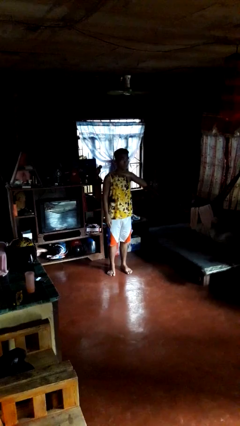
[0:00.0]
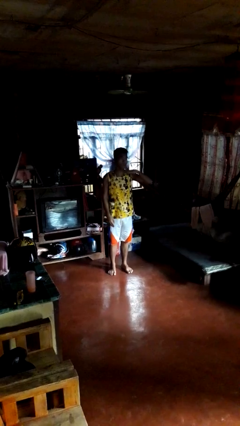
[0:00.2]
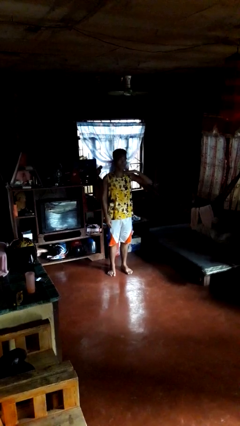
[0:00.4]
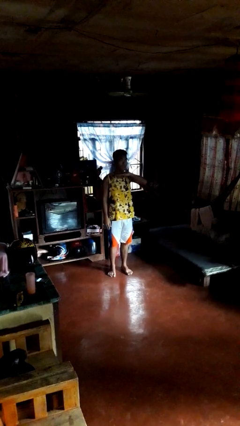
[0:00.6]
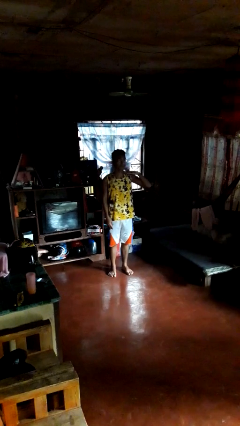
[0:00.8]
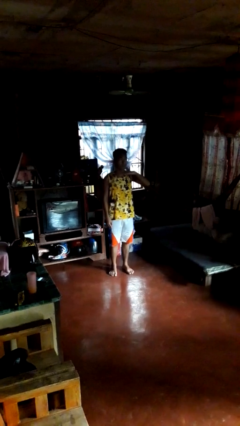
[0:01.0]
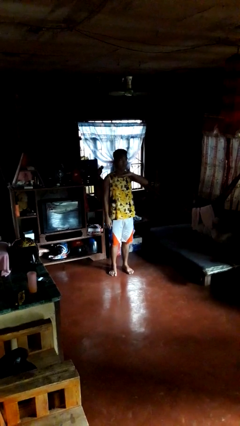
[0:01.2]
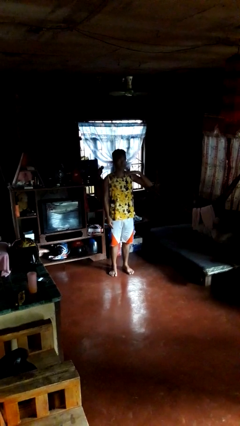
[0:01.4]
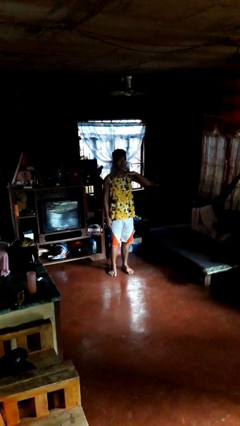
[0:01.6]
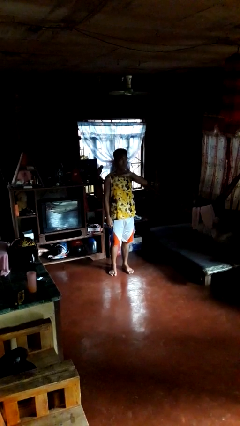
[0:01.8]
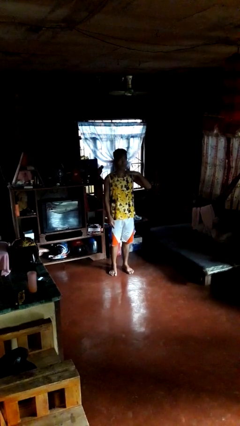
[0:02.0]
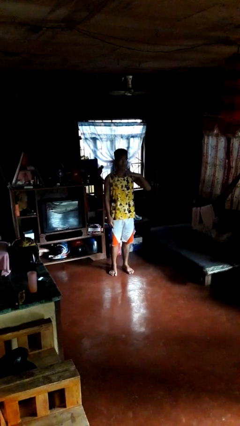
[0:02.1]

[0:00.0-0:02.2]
person gestures cut

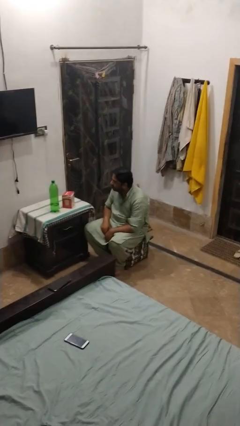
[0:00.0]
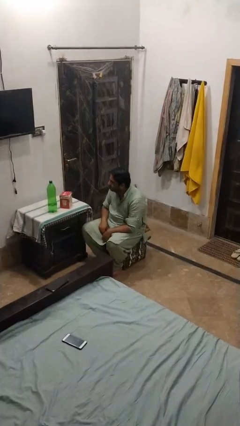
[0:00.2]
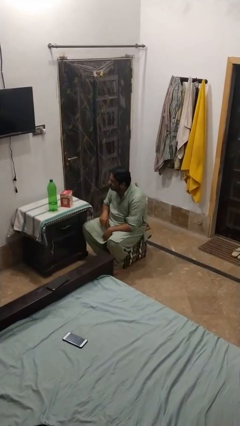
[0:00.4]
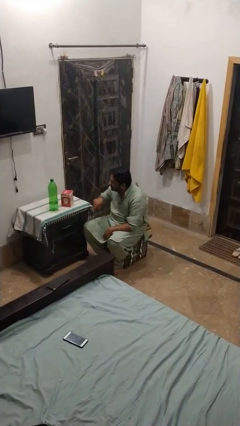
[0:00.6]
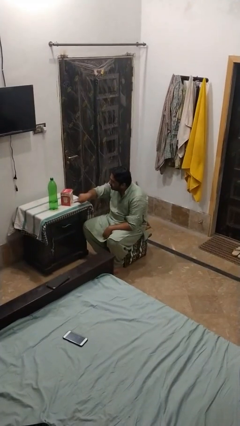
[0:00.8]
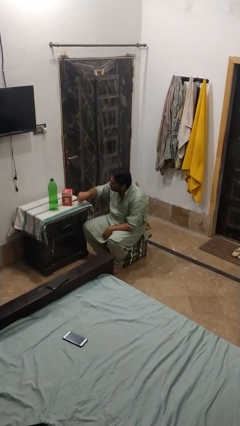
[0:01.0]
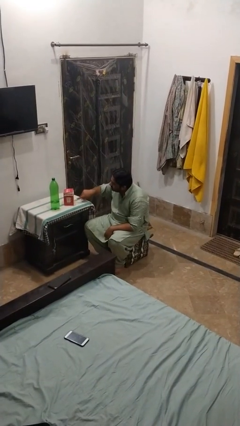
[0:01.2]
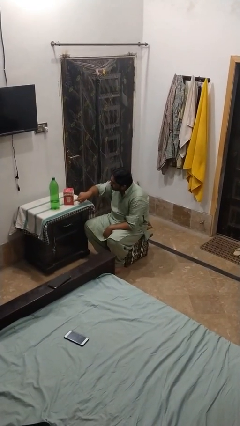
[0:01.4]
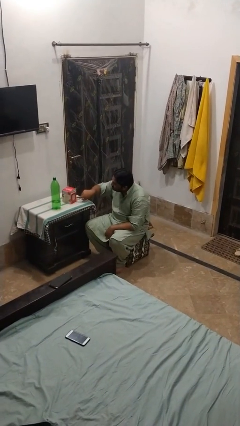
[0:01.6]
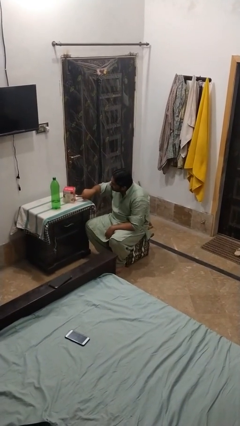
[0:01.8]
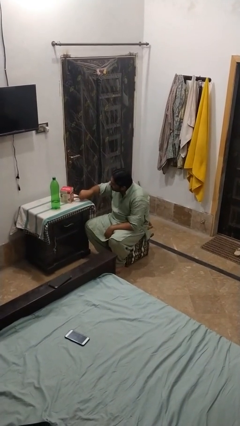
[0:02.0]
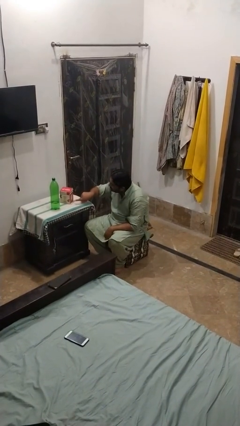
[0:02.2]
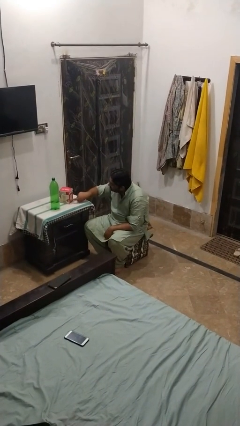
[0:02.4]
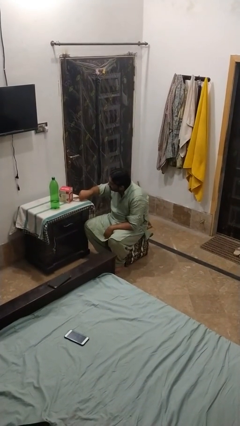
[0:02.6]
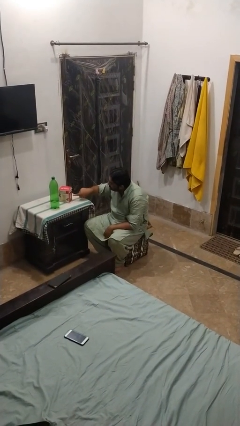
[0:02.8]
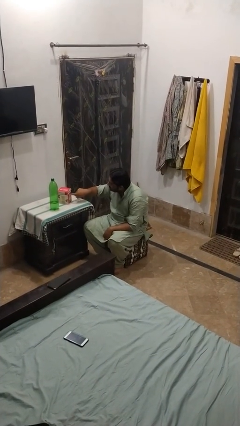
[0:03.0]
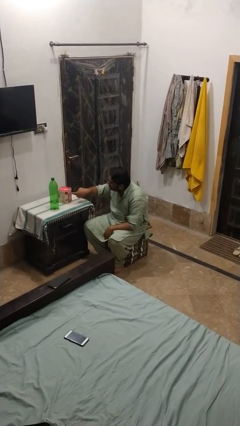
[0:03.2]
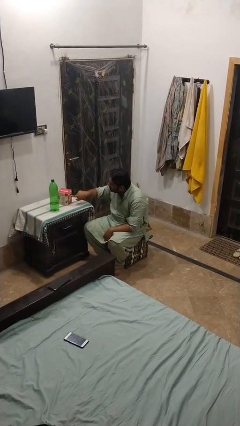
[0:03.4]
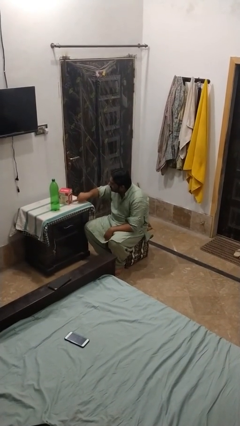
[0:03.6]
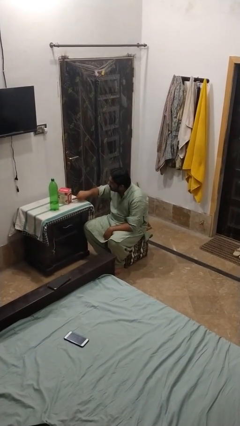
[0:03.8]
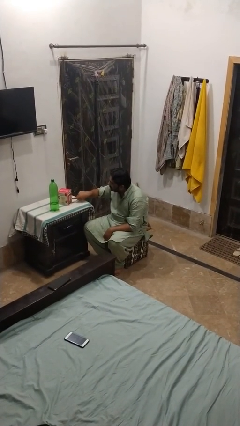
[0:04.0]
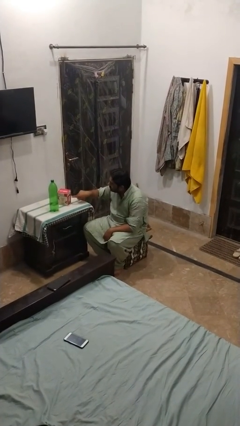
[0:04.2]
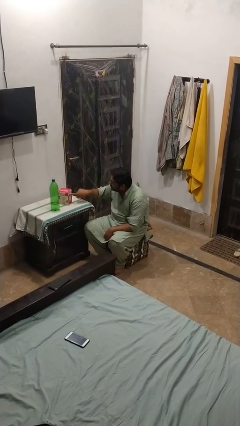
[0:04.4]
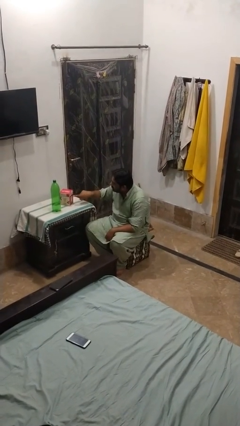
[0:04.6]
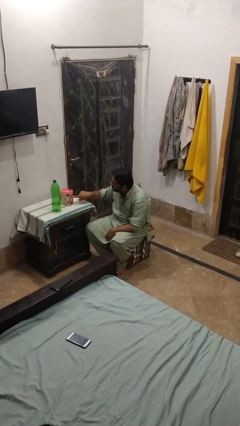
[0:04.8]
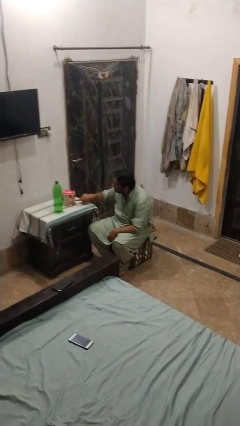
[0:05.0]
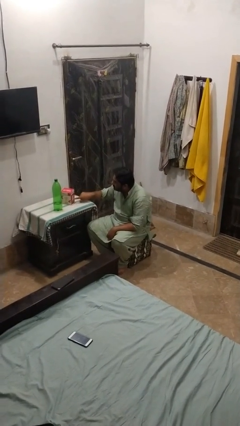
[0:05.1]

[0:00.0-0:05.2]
person taps object with finger

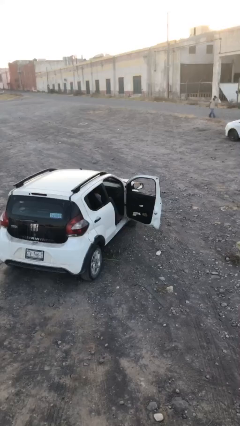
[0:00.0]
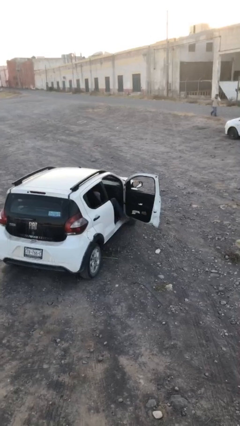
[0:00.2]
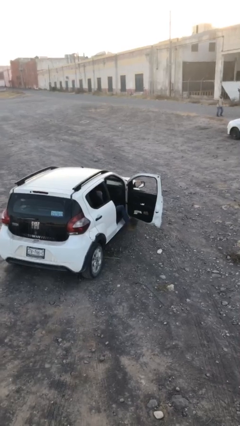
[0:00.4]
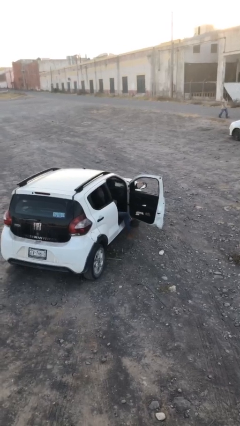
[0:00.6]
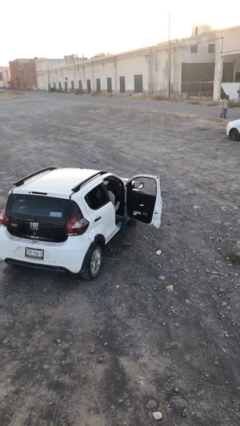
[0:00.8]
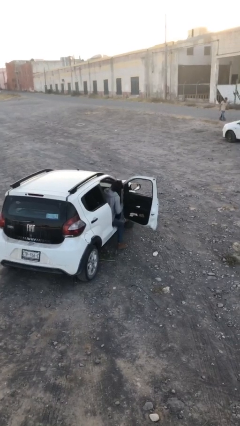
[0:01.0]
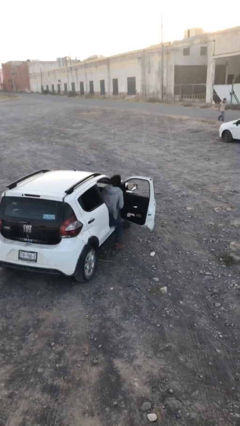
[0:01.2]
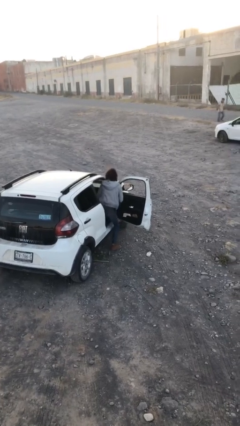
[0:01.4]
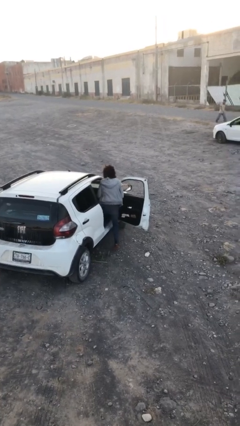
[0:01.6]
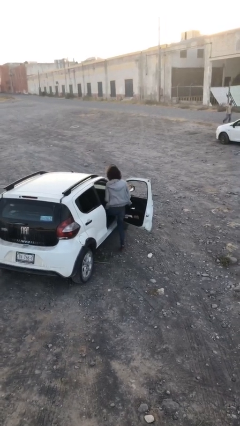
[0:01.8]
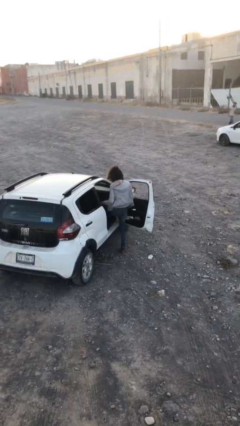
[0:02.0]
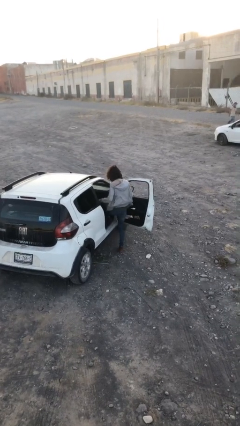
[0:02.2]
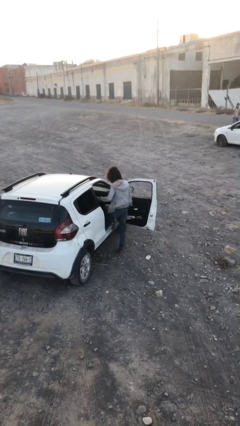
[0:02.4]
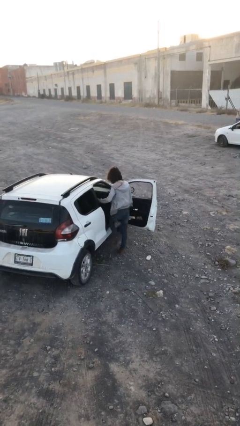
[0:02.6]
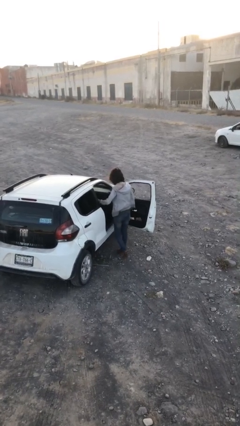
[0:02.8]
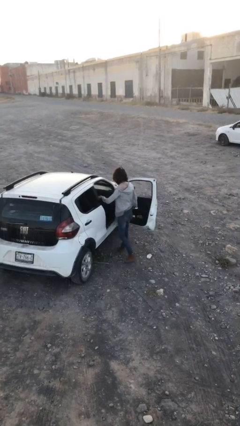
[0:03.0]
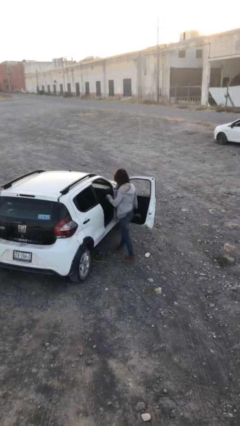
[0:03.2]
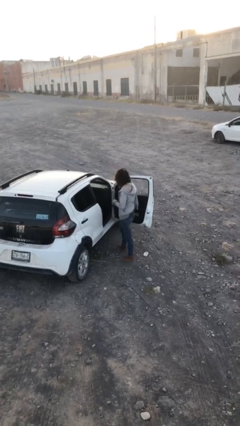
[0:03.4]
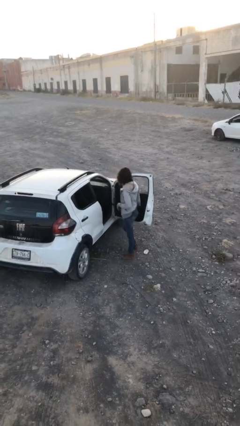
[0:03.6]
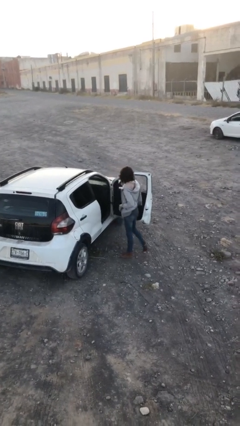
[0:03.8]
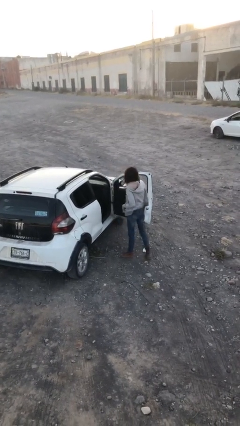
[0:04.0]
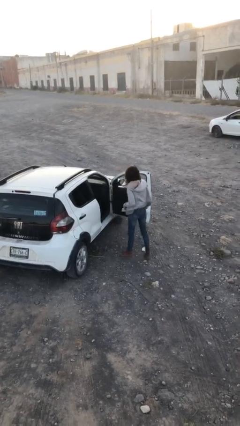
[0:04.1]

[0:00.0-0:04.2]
person exits car

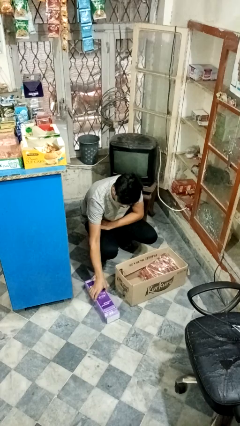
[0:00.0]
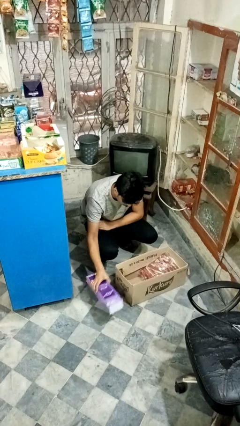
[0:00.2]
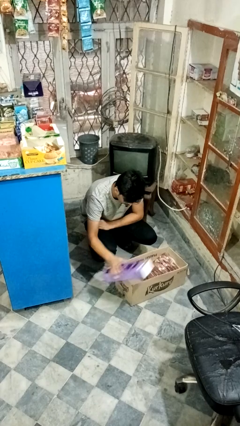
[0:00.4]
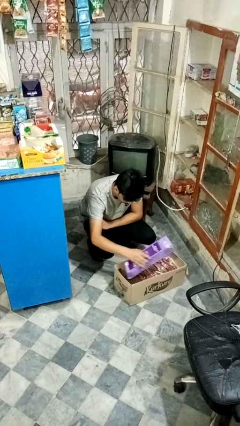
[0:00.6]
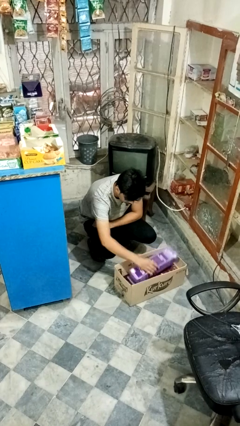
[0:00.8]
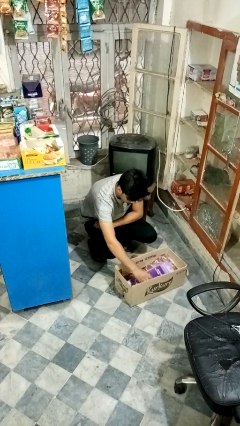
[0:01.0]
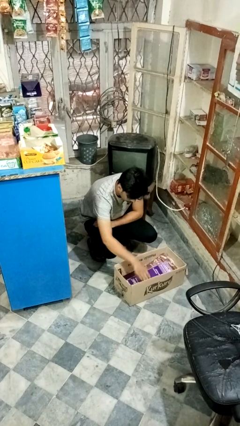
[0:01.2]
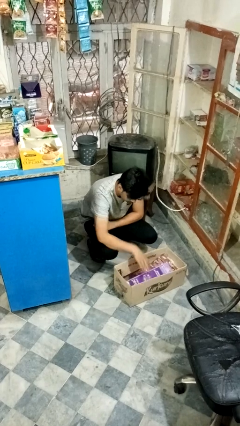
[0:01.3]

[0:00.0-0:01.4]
person puts object into box

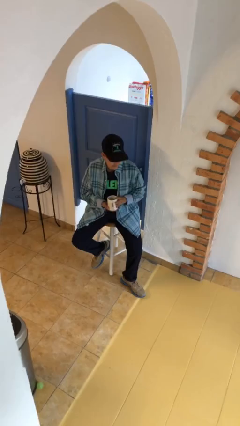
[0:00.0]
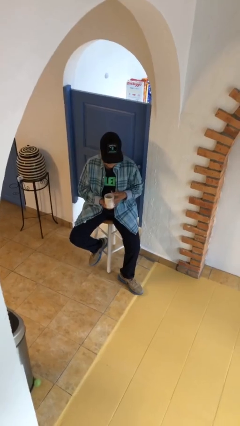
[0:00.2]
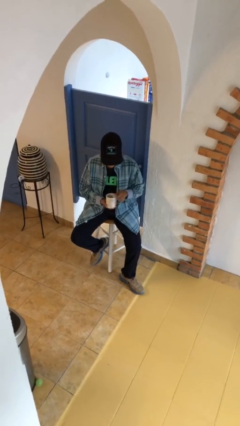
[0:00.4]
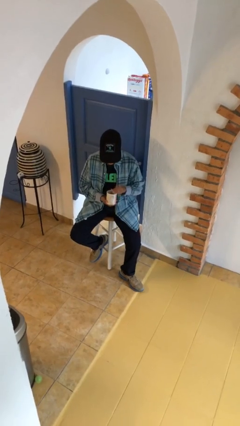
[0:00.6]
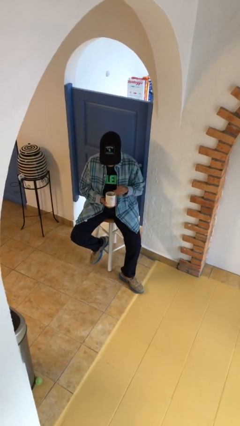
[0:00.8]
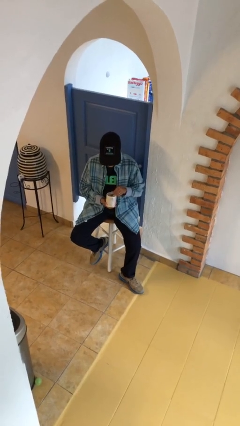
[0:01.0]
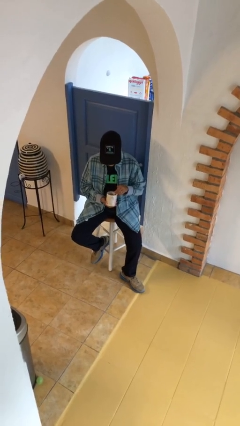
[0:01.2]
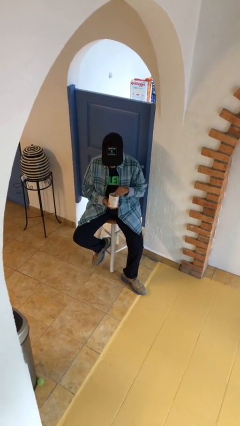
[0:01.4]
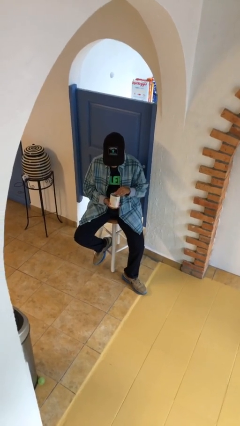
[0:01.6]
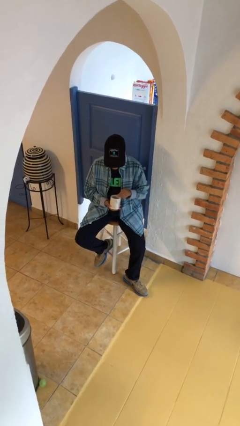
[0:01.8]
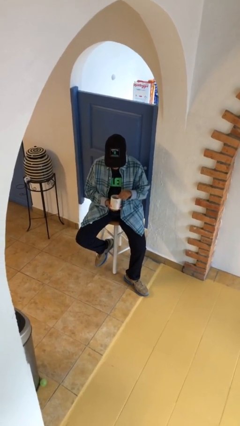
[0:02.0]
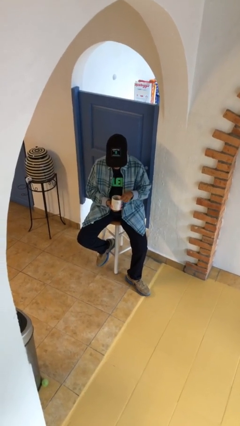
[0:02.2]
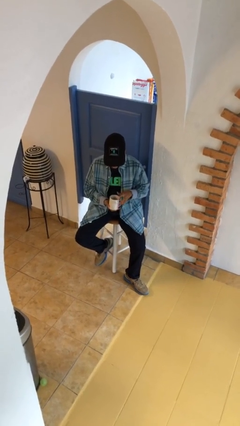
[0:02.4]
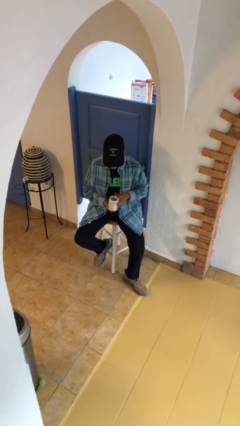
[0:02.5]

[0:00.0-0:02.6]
person stirs mug

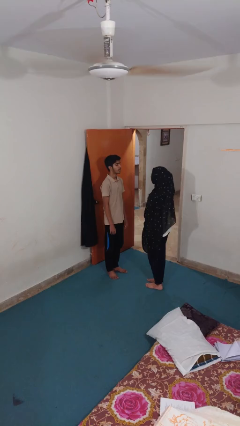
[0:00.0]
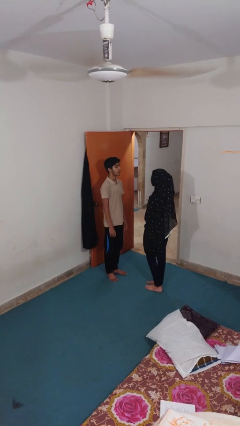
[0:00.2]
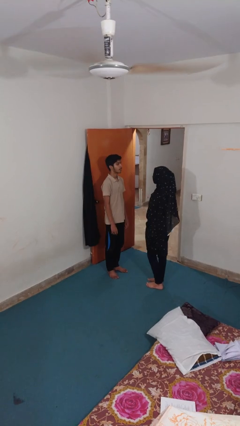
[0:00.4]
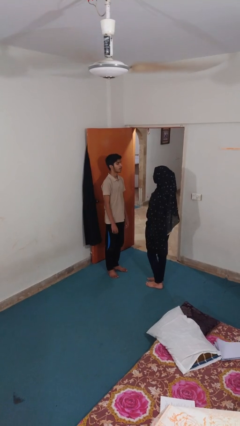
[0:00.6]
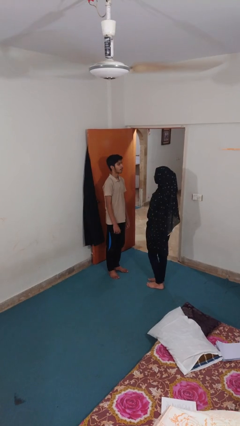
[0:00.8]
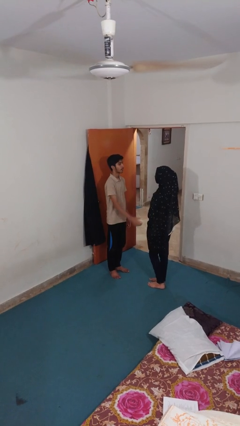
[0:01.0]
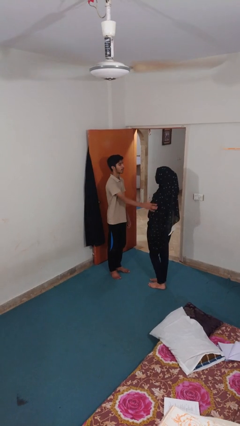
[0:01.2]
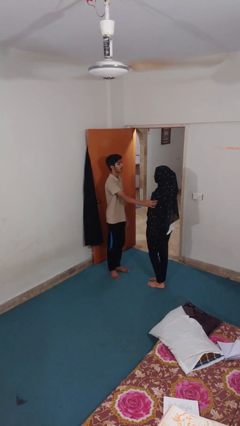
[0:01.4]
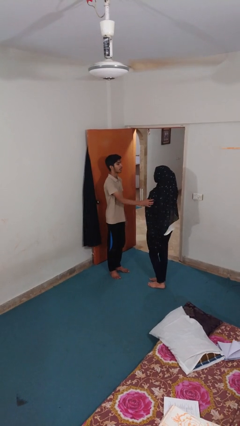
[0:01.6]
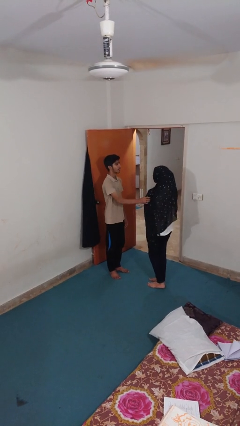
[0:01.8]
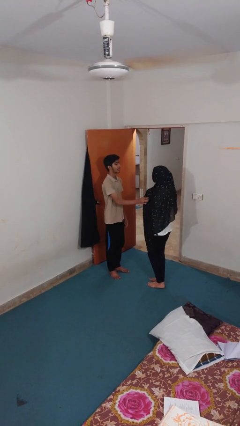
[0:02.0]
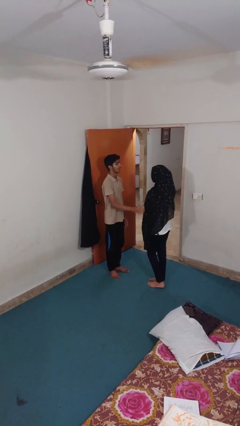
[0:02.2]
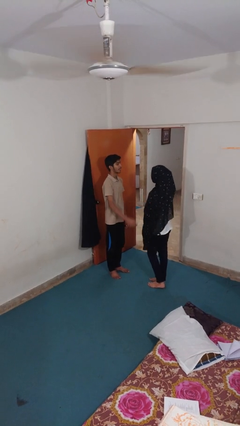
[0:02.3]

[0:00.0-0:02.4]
person grabs person by bicep
